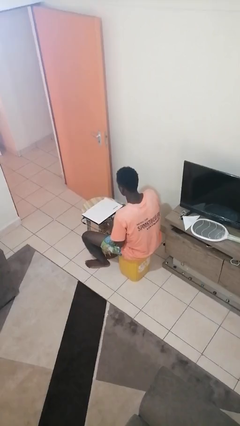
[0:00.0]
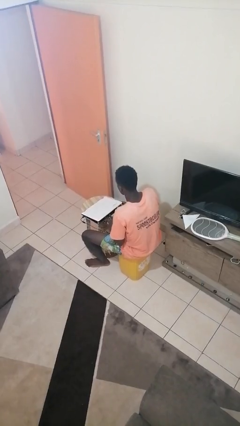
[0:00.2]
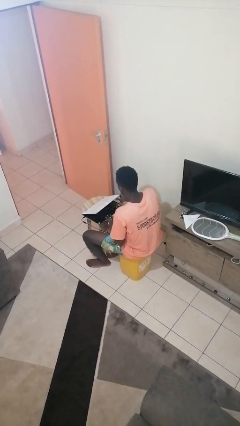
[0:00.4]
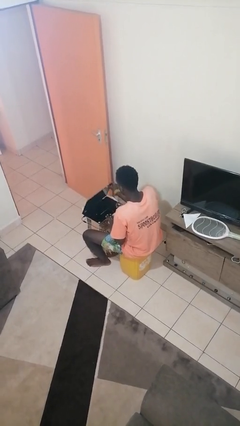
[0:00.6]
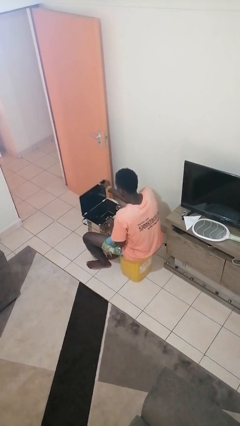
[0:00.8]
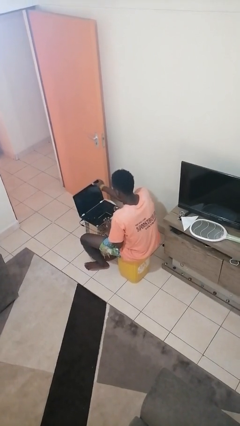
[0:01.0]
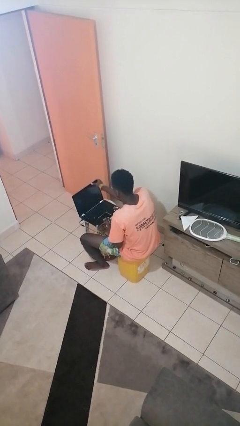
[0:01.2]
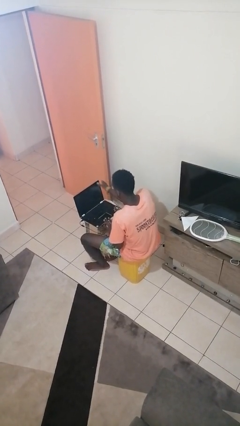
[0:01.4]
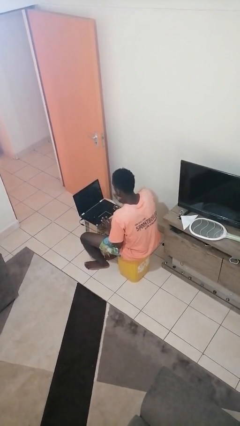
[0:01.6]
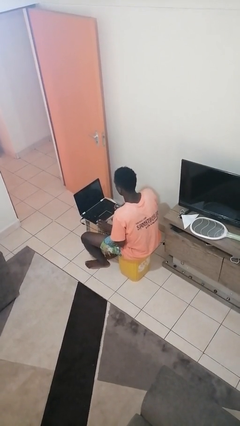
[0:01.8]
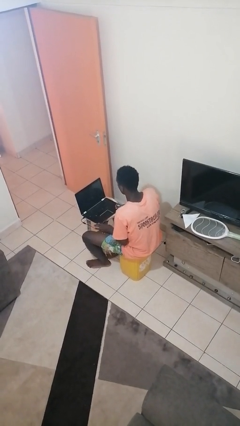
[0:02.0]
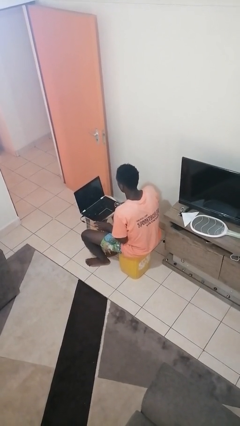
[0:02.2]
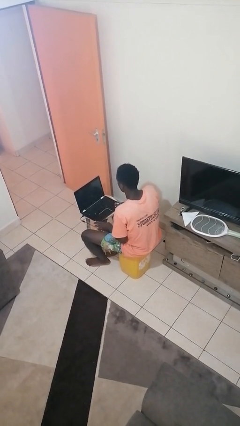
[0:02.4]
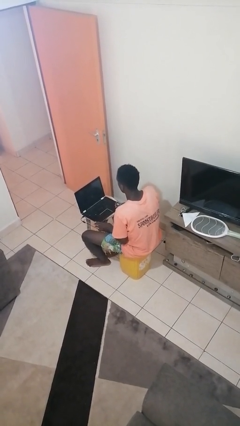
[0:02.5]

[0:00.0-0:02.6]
person opens laptop

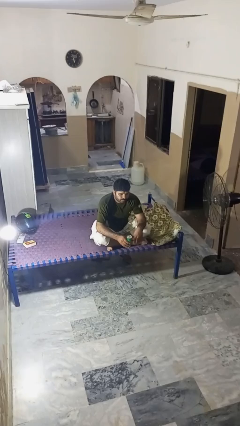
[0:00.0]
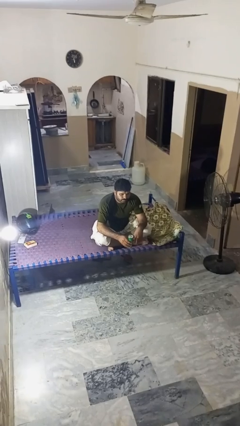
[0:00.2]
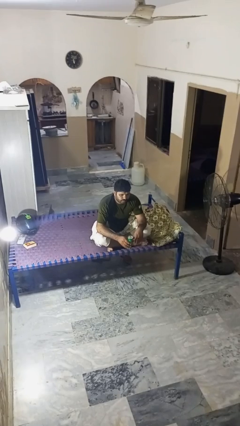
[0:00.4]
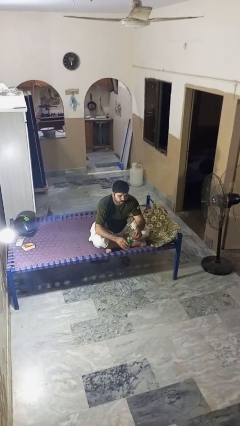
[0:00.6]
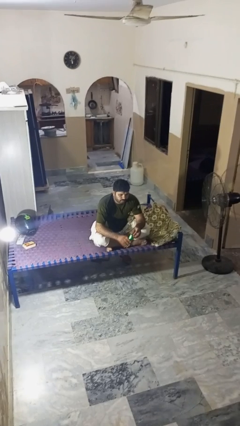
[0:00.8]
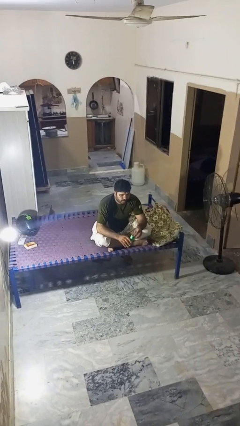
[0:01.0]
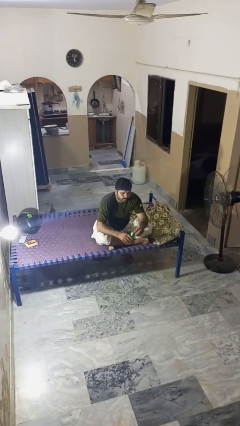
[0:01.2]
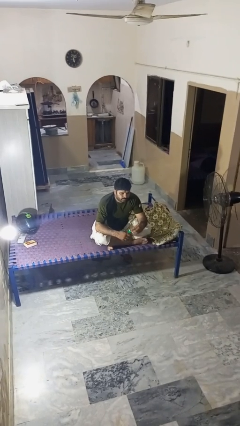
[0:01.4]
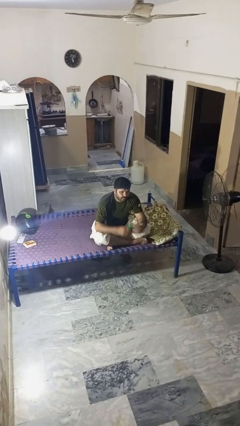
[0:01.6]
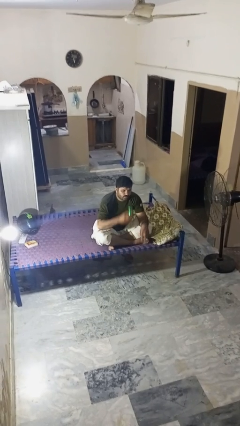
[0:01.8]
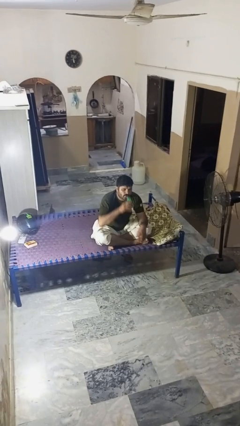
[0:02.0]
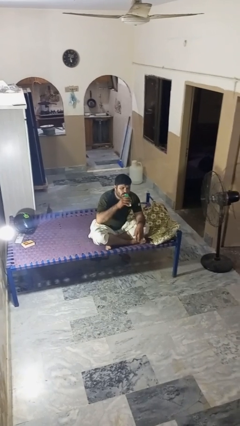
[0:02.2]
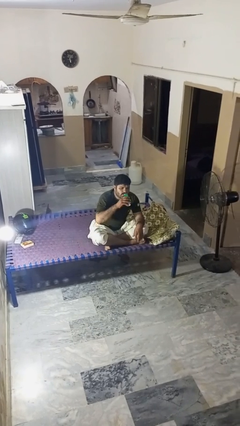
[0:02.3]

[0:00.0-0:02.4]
person opens beverage can

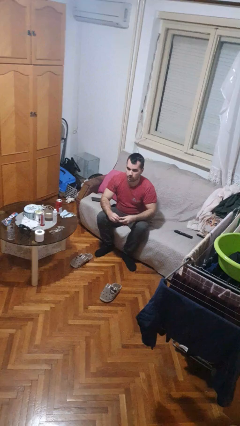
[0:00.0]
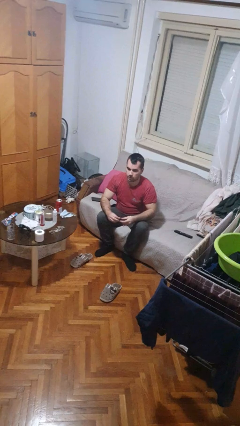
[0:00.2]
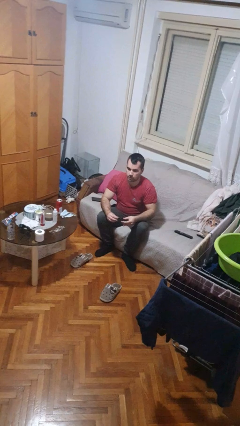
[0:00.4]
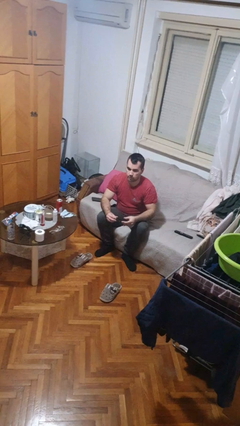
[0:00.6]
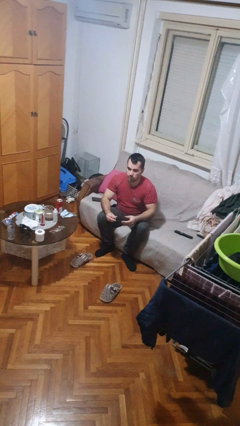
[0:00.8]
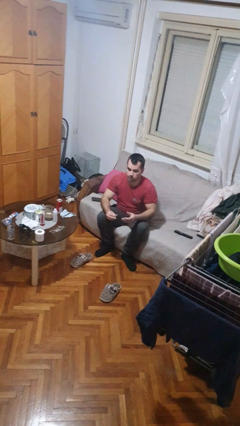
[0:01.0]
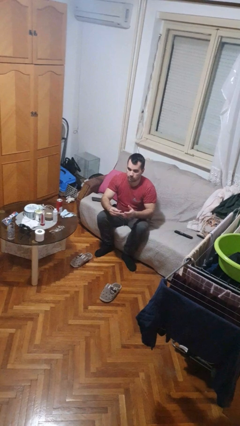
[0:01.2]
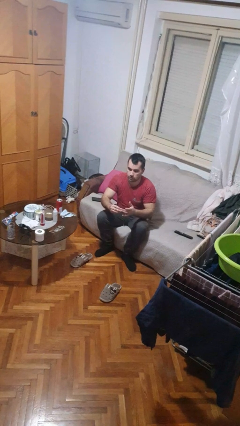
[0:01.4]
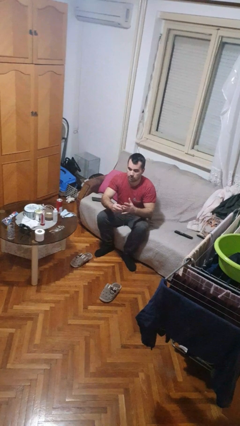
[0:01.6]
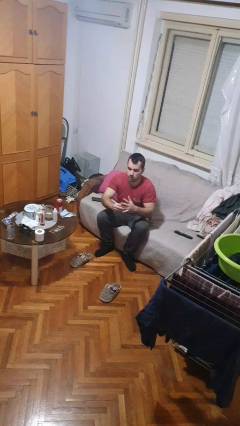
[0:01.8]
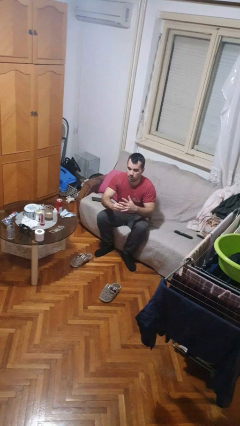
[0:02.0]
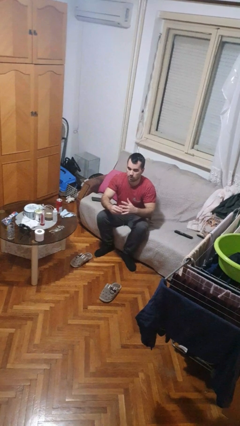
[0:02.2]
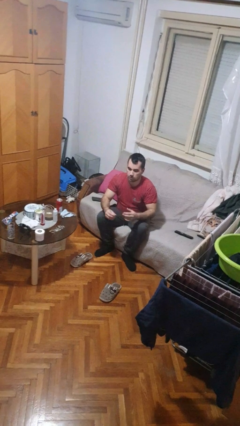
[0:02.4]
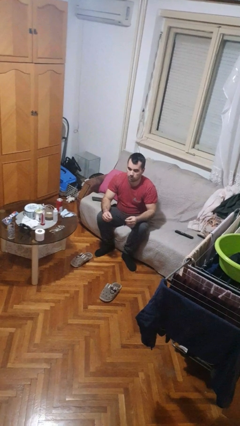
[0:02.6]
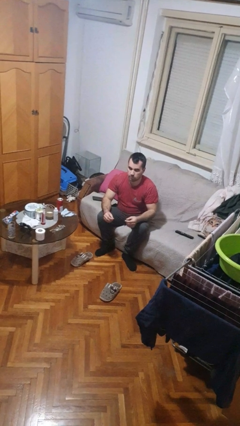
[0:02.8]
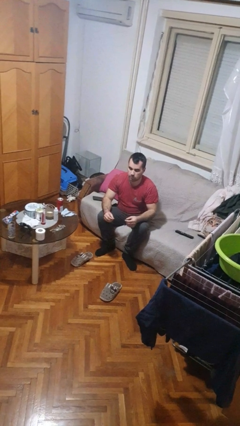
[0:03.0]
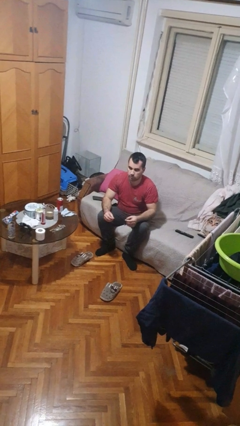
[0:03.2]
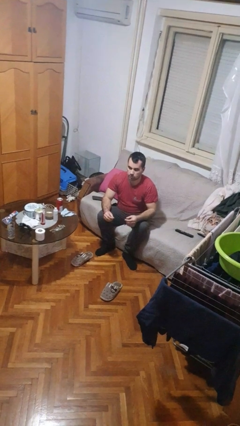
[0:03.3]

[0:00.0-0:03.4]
person puts on ring

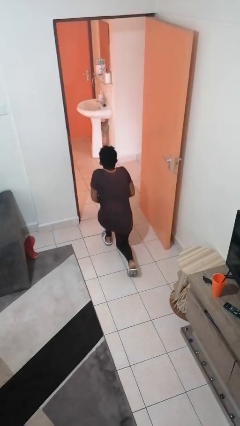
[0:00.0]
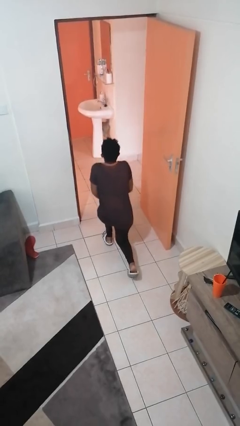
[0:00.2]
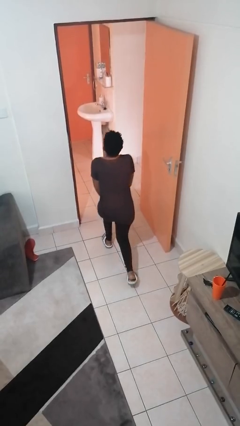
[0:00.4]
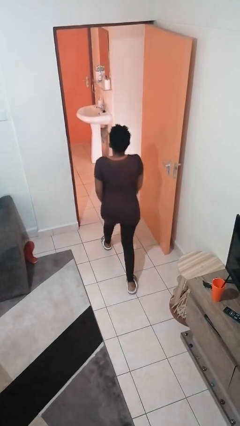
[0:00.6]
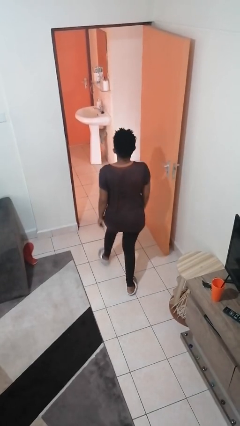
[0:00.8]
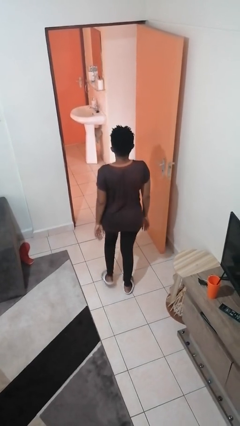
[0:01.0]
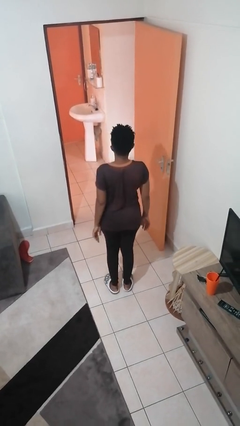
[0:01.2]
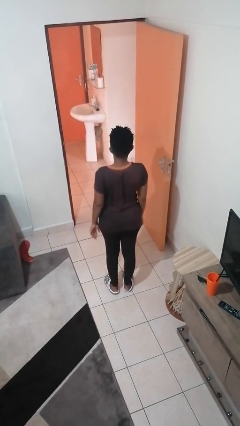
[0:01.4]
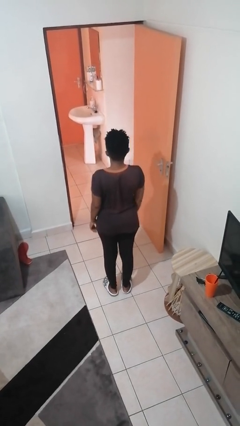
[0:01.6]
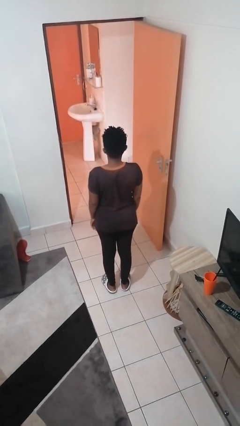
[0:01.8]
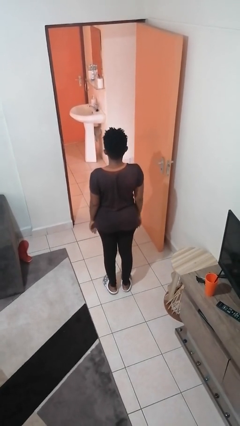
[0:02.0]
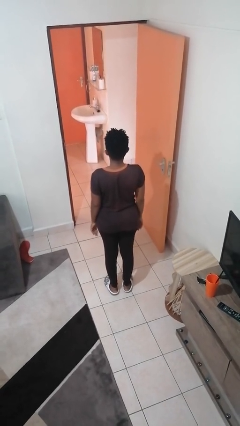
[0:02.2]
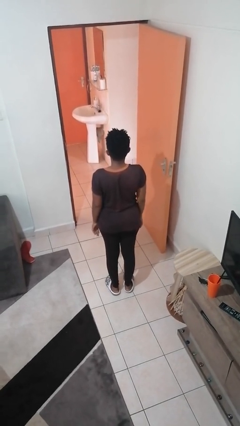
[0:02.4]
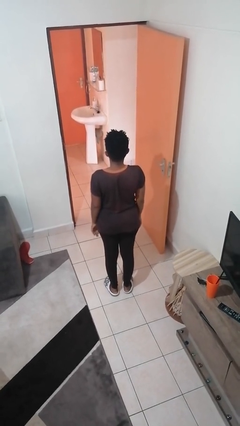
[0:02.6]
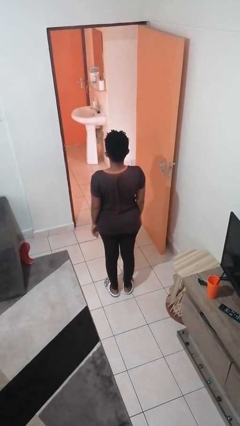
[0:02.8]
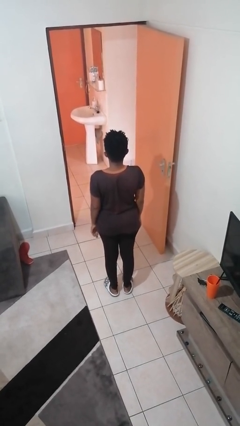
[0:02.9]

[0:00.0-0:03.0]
person stands up from floor

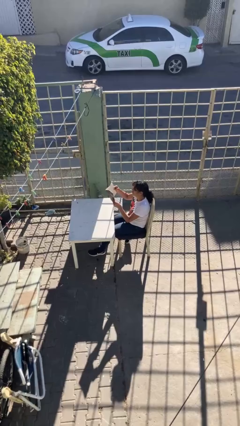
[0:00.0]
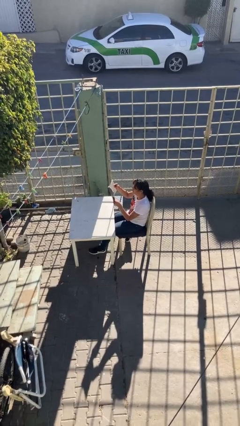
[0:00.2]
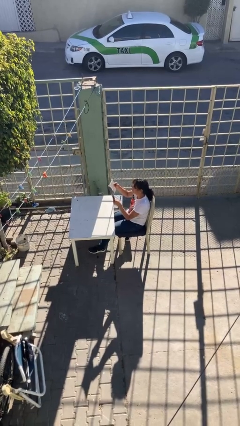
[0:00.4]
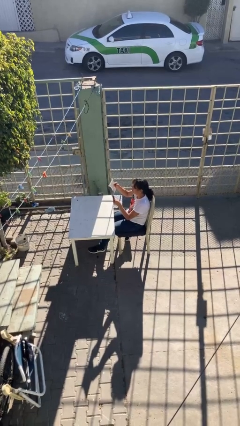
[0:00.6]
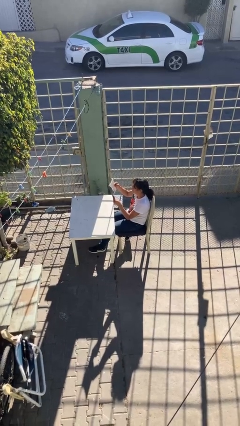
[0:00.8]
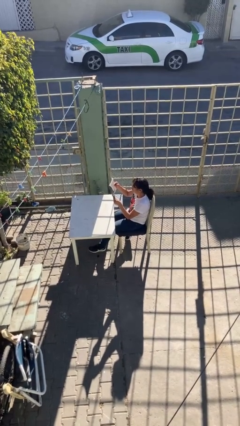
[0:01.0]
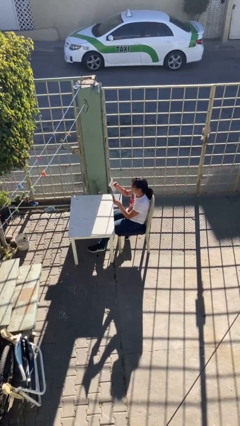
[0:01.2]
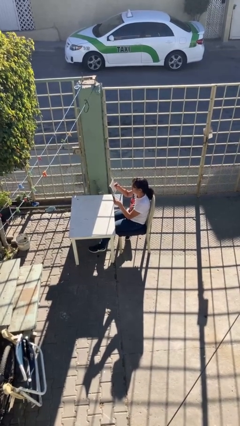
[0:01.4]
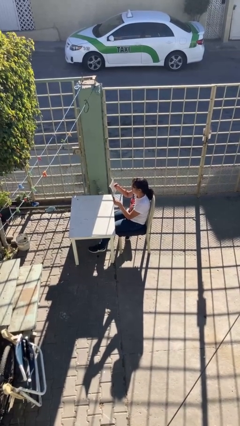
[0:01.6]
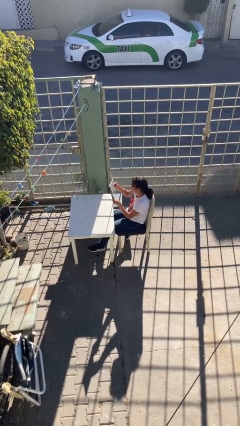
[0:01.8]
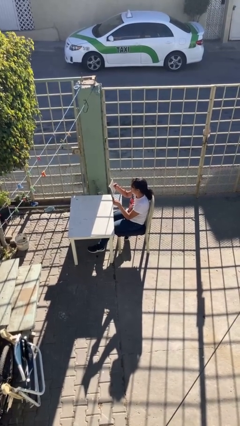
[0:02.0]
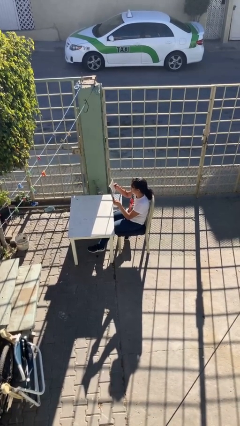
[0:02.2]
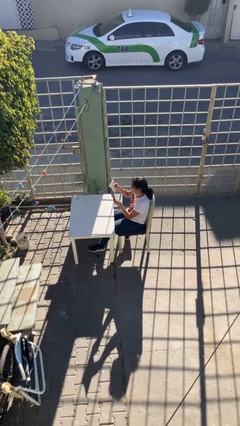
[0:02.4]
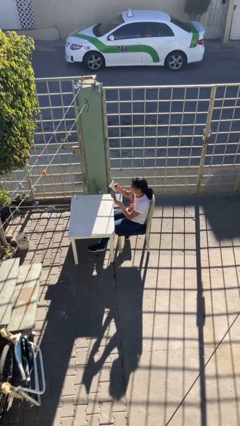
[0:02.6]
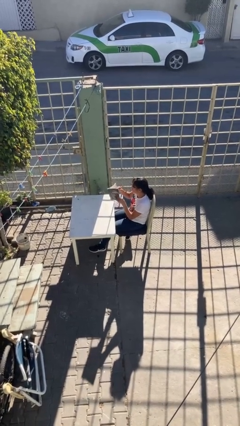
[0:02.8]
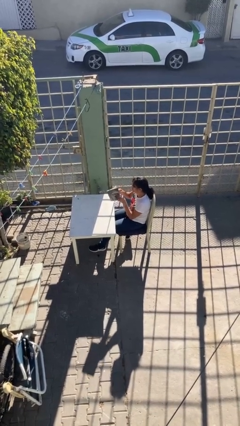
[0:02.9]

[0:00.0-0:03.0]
person reads document

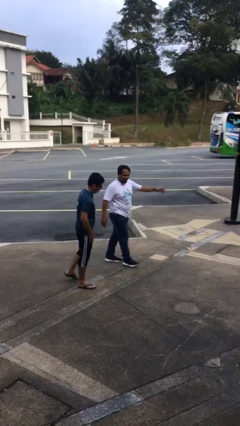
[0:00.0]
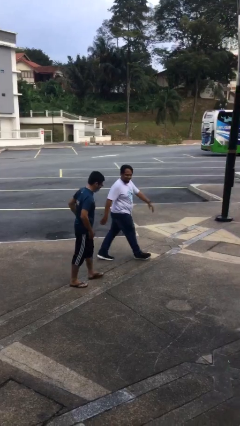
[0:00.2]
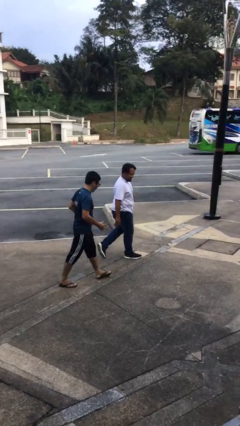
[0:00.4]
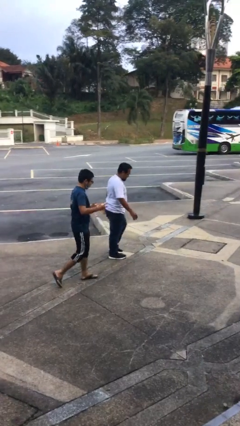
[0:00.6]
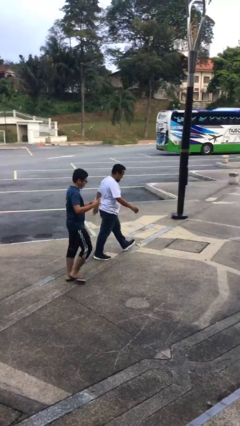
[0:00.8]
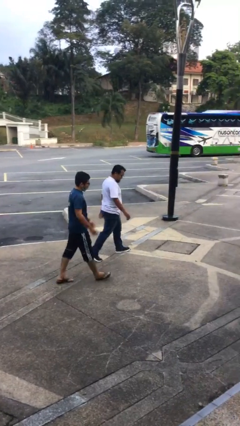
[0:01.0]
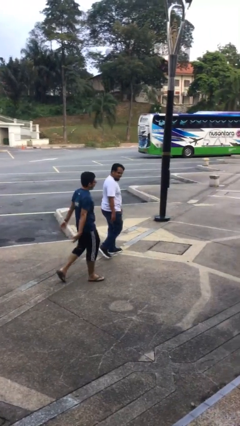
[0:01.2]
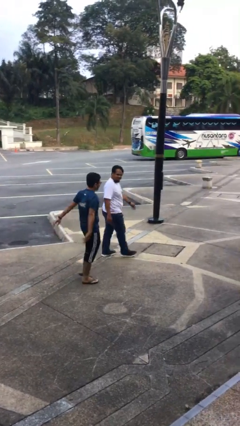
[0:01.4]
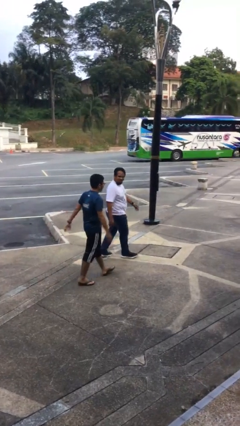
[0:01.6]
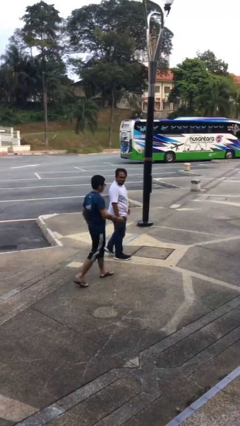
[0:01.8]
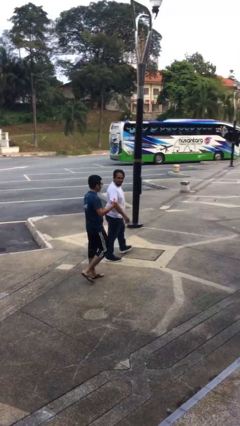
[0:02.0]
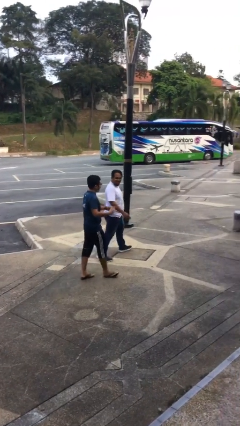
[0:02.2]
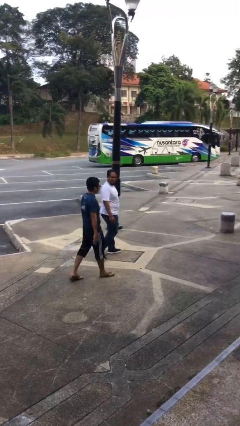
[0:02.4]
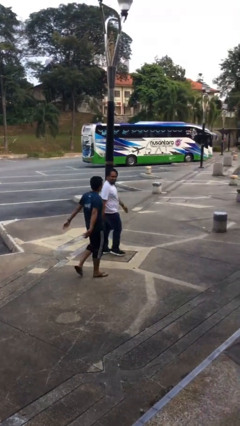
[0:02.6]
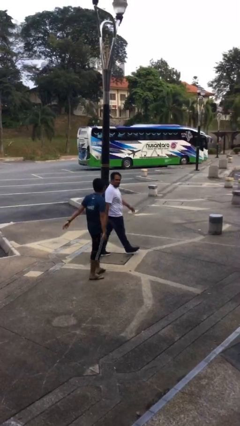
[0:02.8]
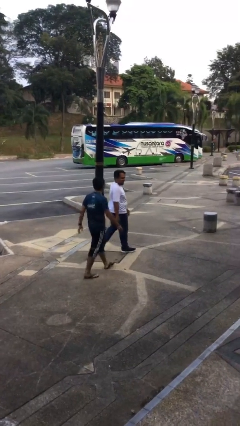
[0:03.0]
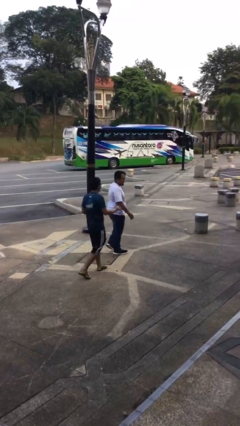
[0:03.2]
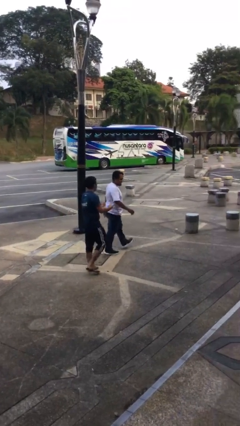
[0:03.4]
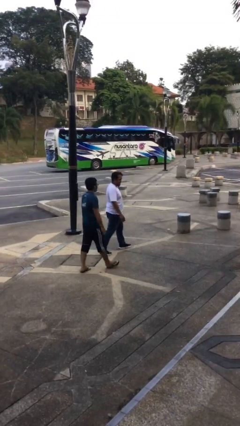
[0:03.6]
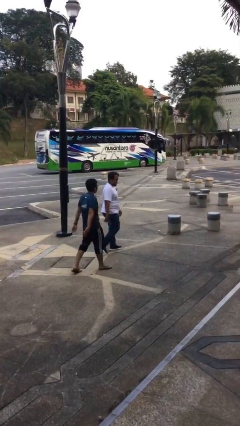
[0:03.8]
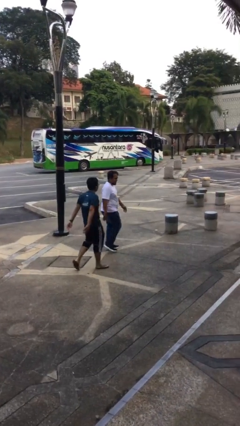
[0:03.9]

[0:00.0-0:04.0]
person talks to person
